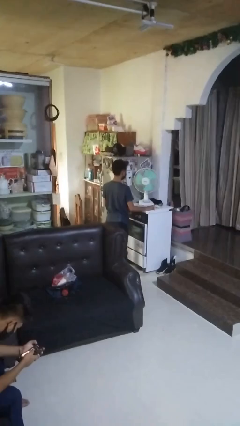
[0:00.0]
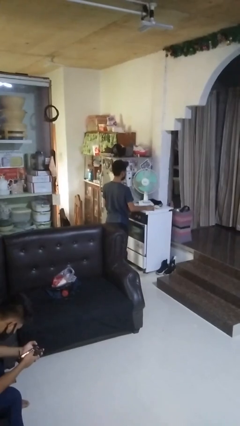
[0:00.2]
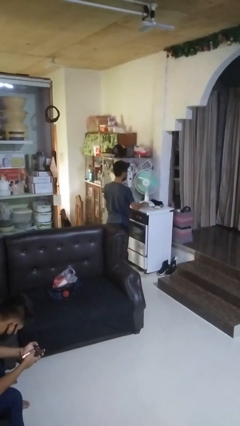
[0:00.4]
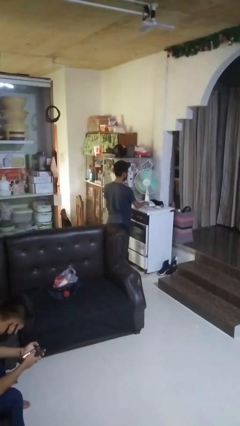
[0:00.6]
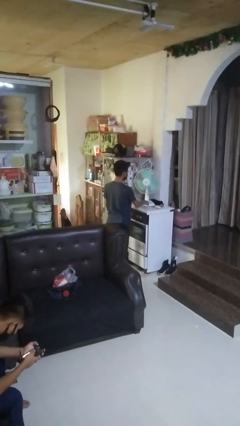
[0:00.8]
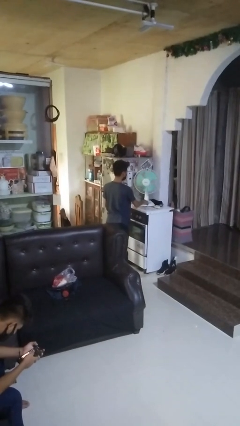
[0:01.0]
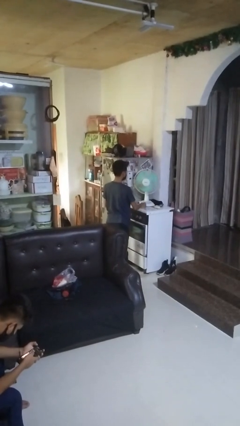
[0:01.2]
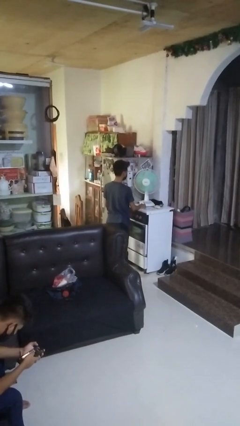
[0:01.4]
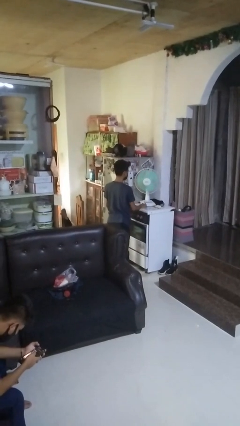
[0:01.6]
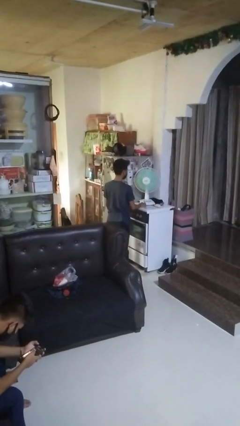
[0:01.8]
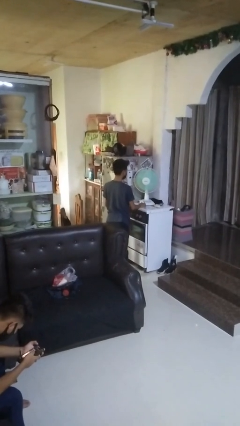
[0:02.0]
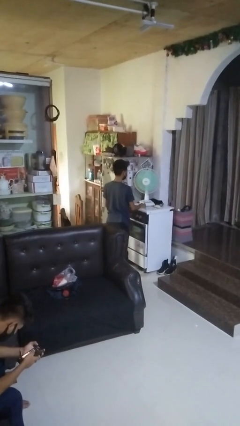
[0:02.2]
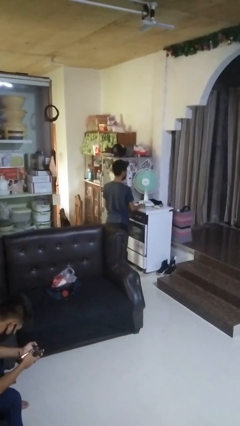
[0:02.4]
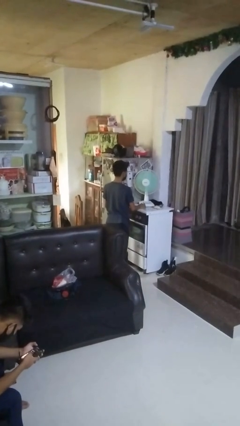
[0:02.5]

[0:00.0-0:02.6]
person turns on fan

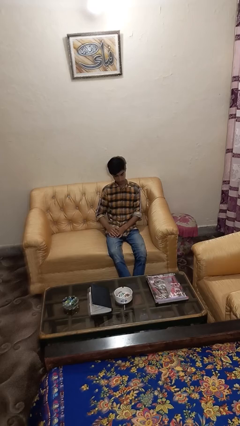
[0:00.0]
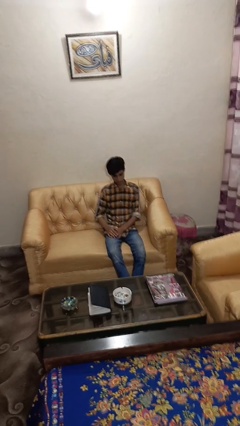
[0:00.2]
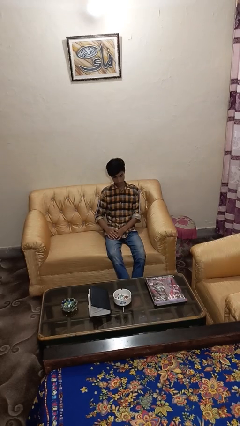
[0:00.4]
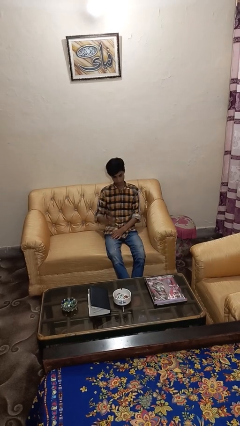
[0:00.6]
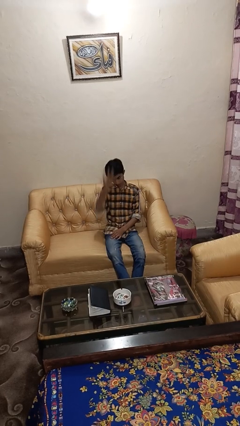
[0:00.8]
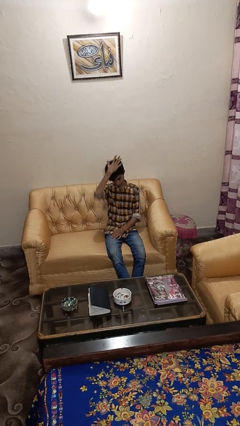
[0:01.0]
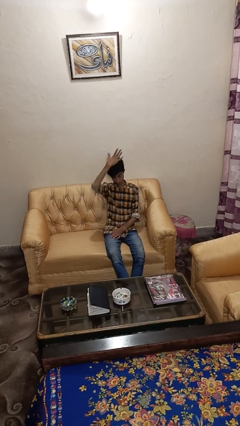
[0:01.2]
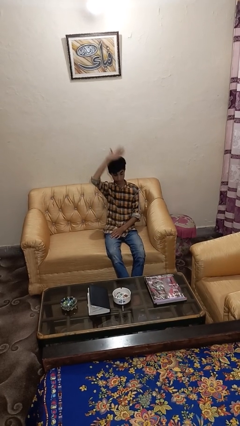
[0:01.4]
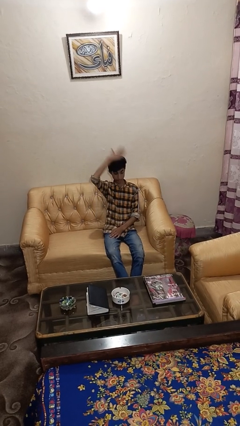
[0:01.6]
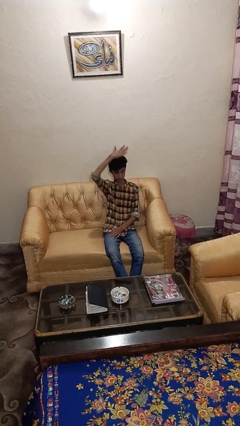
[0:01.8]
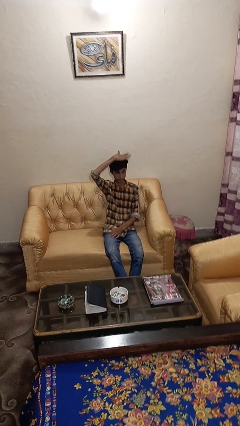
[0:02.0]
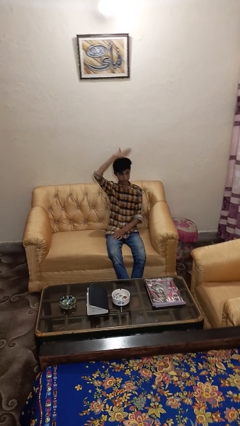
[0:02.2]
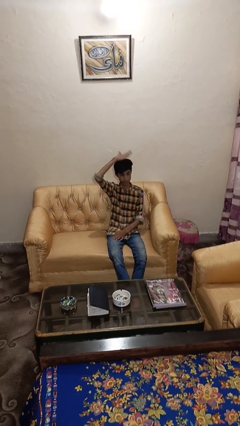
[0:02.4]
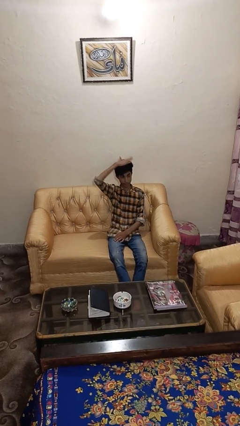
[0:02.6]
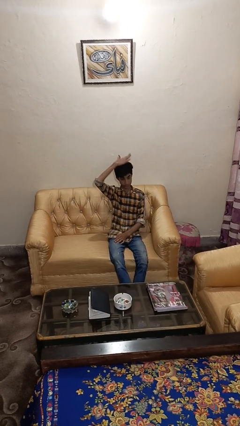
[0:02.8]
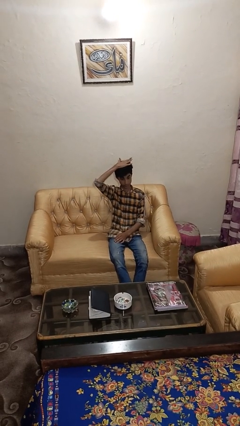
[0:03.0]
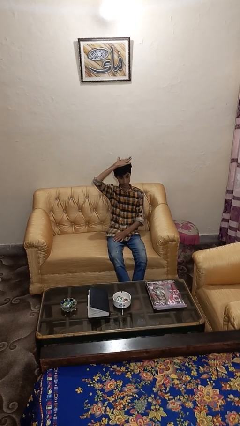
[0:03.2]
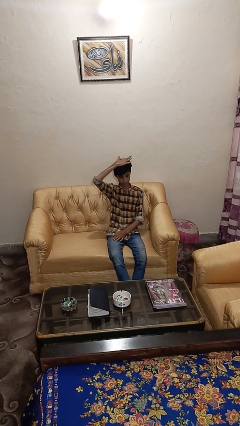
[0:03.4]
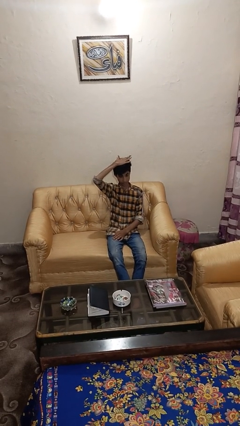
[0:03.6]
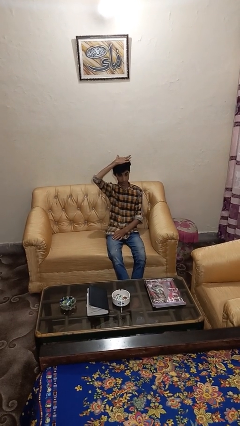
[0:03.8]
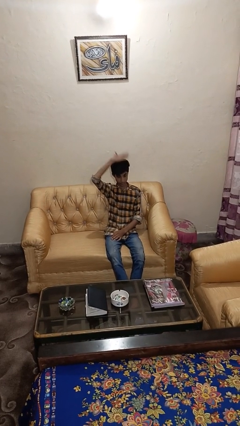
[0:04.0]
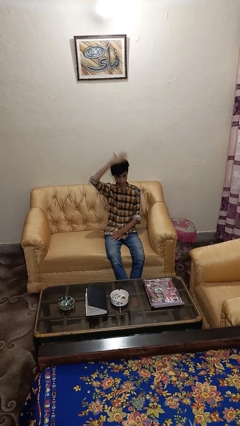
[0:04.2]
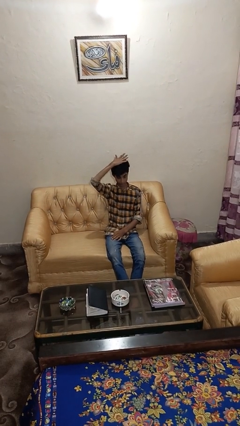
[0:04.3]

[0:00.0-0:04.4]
person pats head

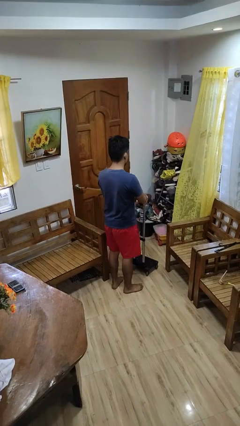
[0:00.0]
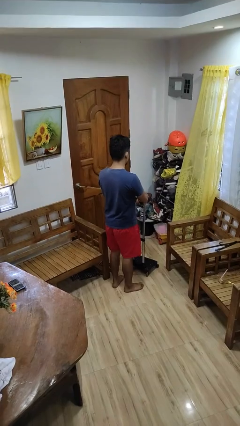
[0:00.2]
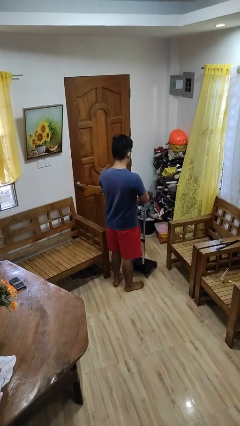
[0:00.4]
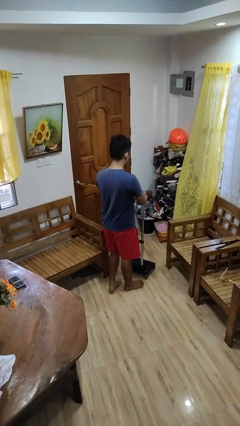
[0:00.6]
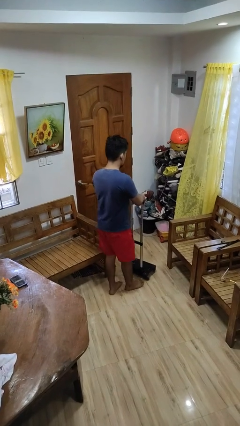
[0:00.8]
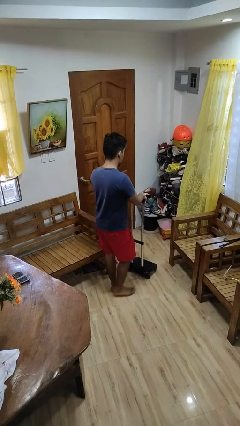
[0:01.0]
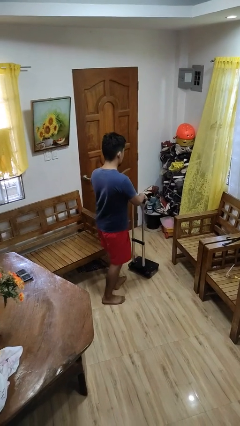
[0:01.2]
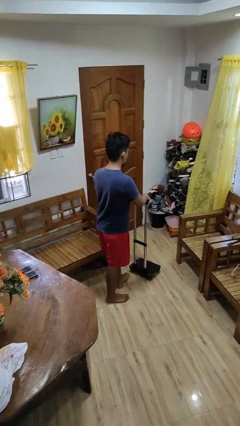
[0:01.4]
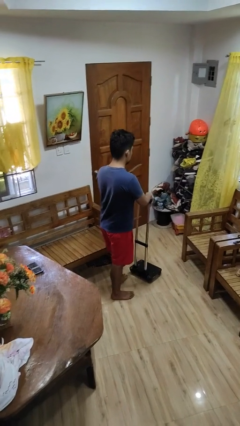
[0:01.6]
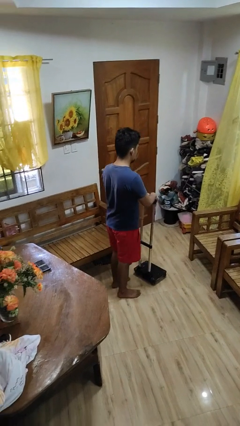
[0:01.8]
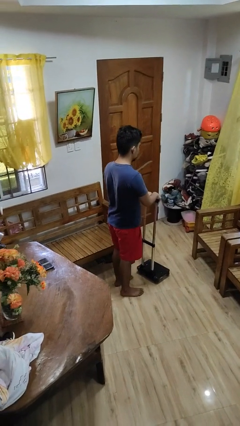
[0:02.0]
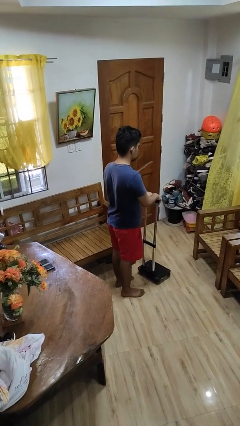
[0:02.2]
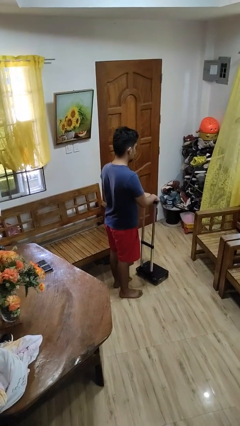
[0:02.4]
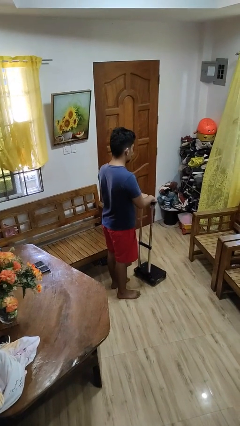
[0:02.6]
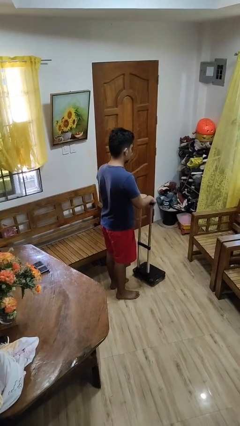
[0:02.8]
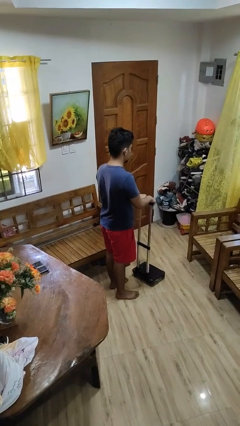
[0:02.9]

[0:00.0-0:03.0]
person pulls wheeled cart

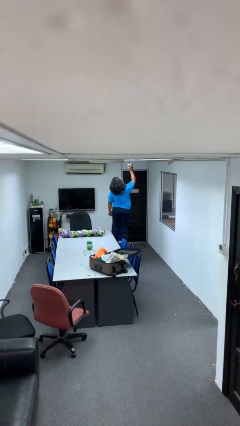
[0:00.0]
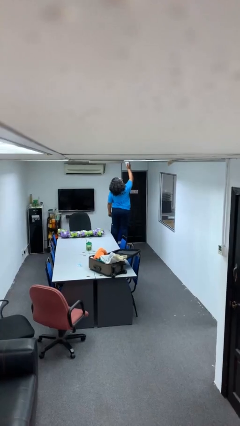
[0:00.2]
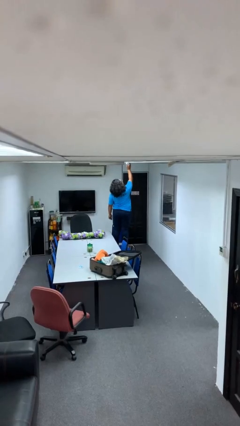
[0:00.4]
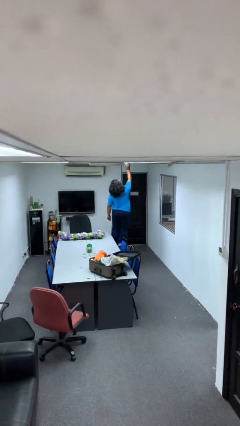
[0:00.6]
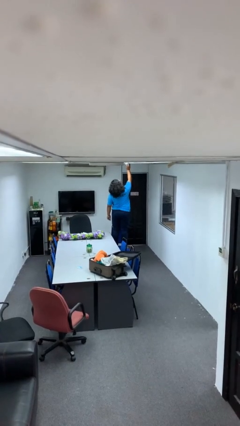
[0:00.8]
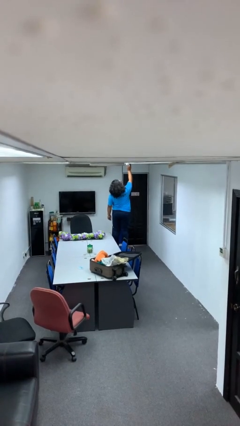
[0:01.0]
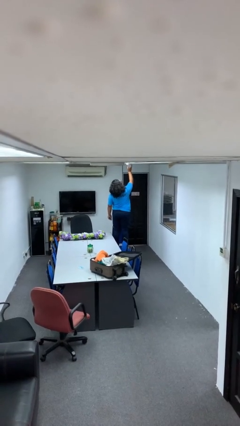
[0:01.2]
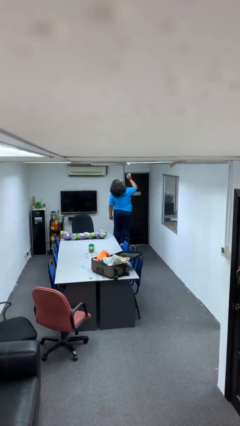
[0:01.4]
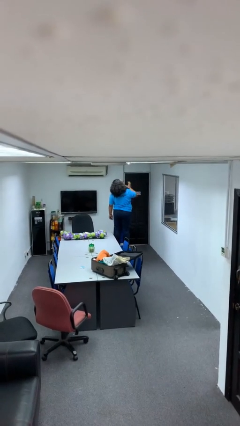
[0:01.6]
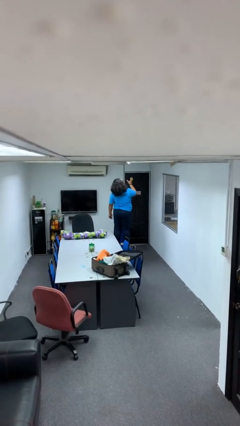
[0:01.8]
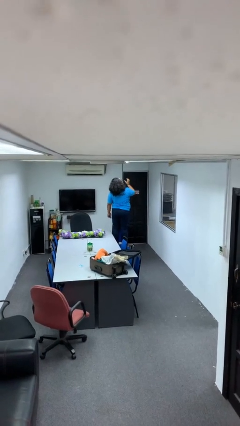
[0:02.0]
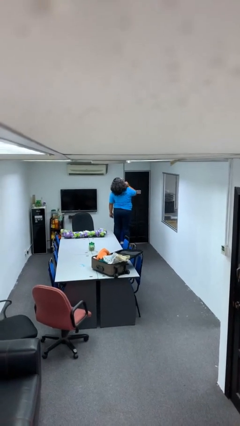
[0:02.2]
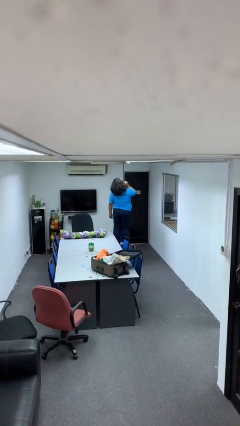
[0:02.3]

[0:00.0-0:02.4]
person puts up smoke detector

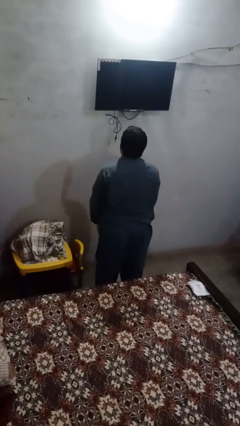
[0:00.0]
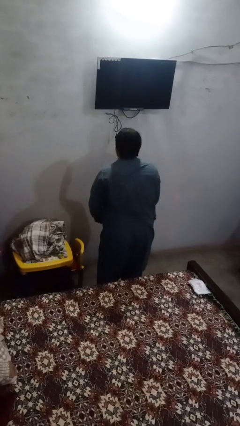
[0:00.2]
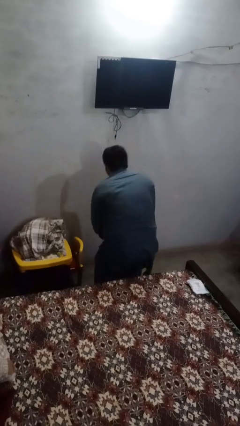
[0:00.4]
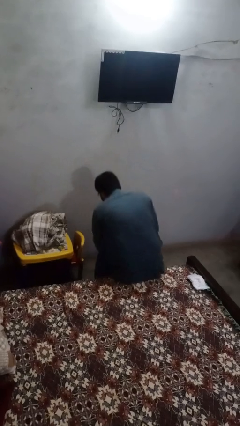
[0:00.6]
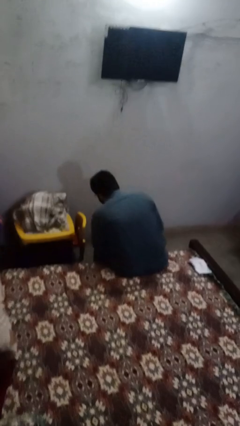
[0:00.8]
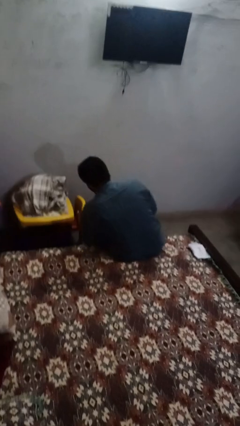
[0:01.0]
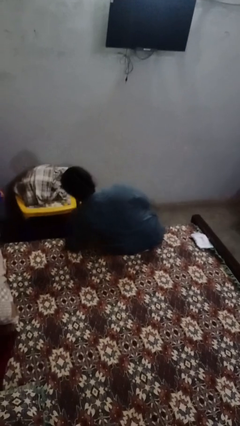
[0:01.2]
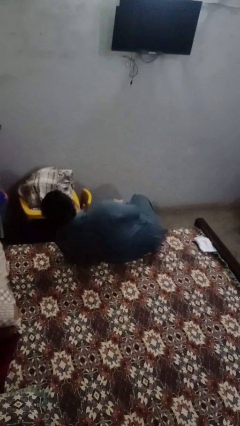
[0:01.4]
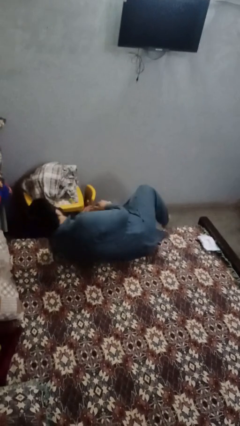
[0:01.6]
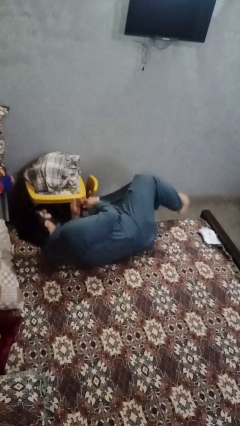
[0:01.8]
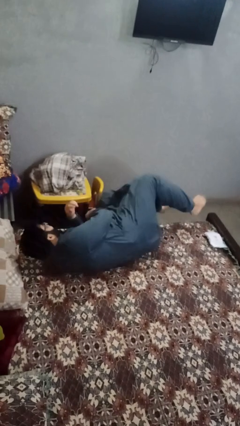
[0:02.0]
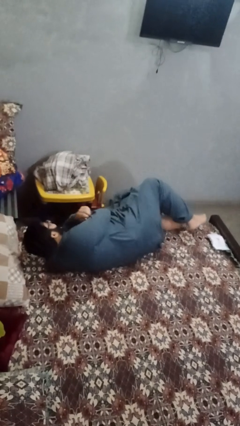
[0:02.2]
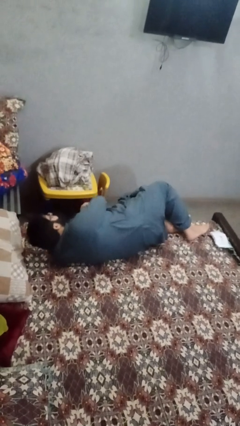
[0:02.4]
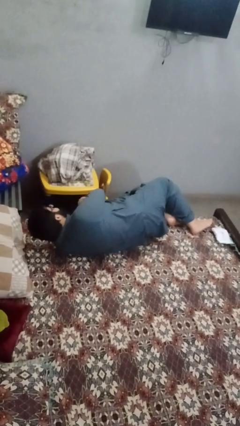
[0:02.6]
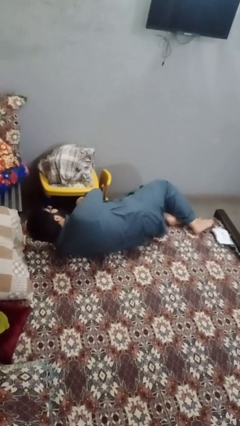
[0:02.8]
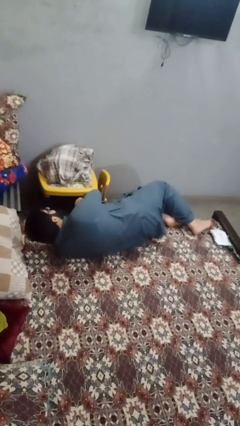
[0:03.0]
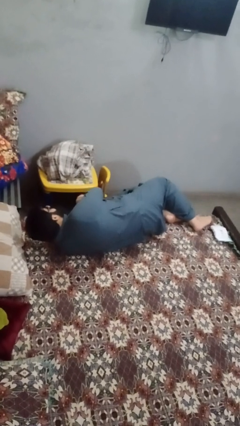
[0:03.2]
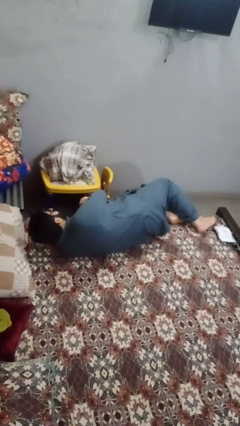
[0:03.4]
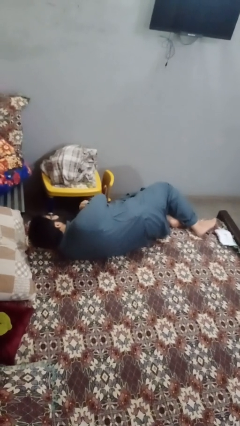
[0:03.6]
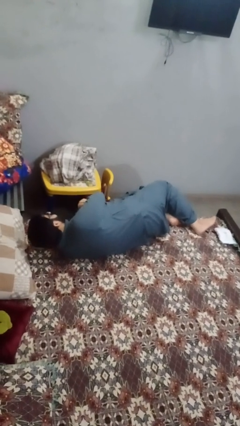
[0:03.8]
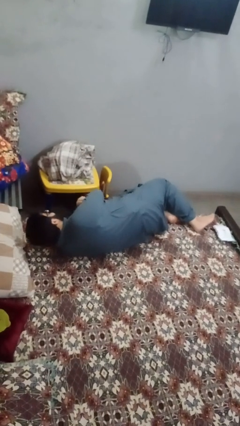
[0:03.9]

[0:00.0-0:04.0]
person lies down on bed

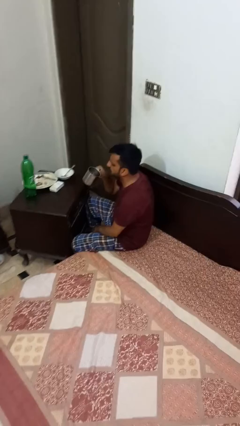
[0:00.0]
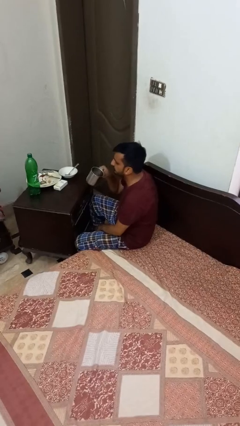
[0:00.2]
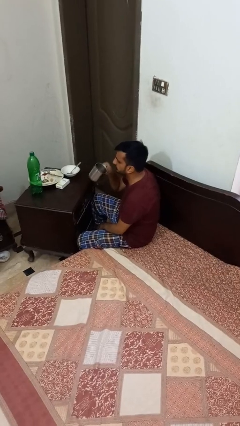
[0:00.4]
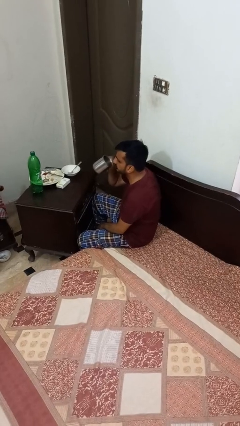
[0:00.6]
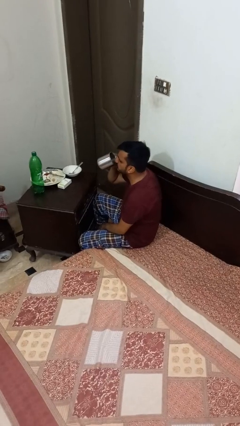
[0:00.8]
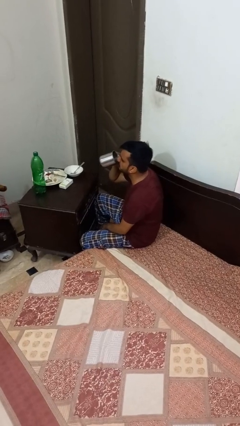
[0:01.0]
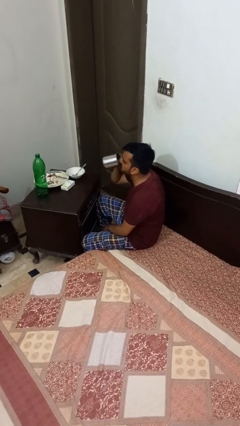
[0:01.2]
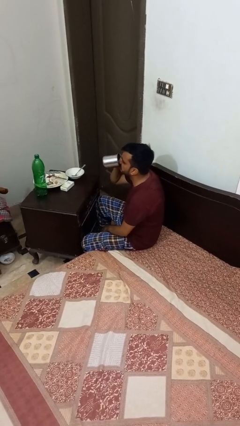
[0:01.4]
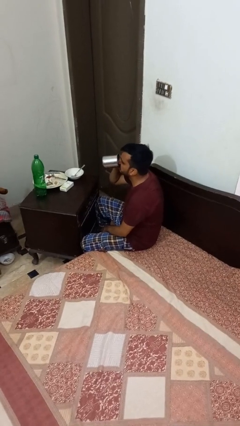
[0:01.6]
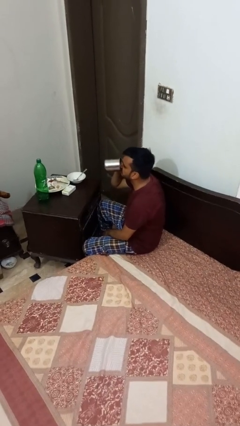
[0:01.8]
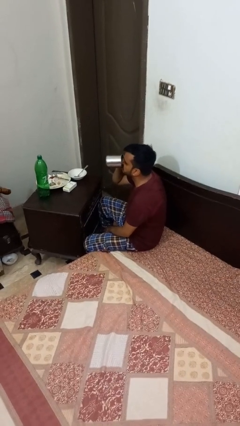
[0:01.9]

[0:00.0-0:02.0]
person drinks from mug
